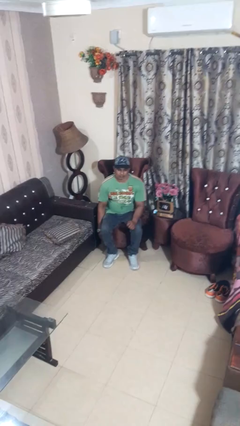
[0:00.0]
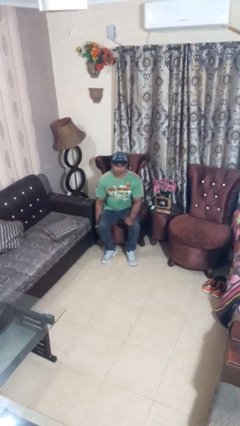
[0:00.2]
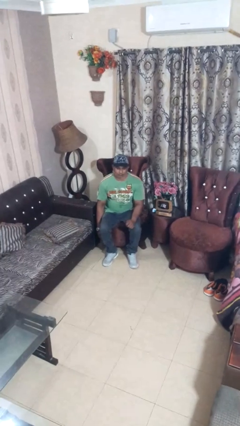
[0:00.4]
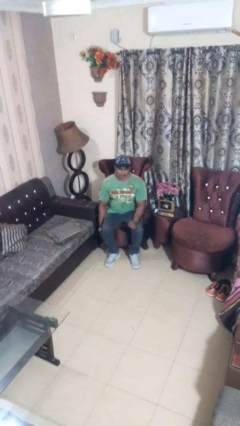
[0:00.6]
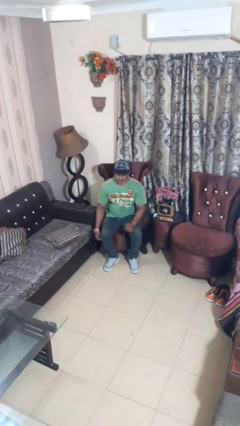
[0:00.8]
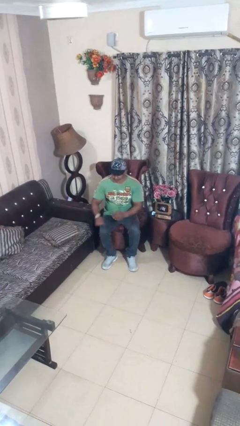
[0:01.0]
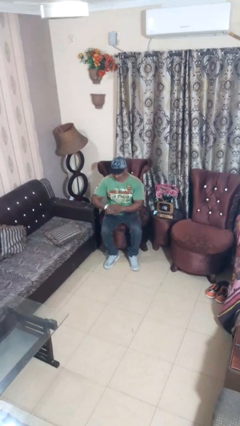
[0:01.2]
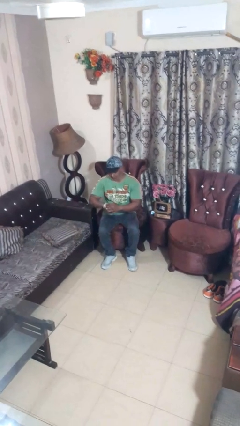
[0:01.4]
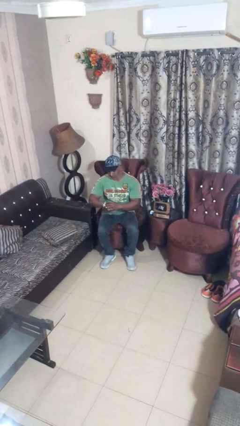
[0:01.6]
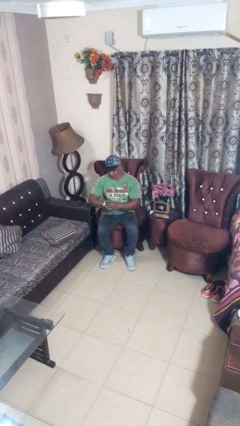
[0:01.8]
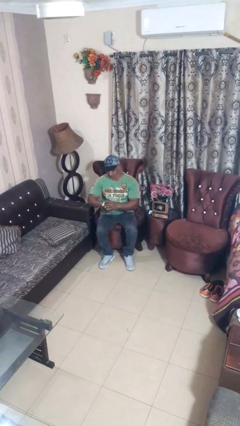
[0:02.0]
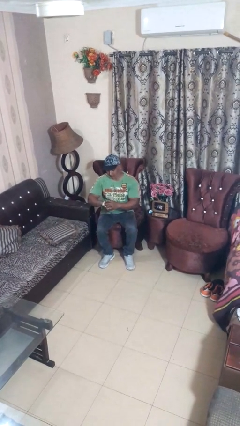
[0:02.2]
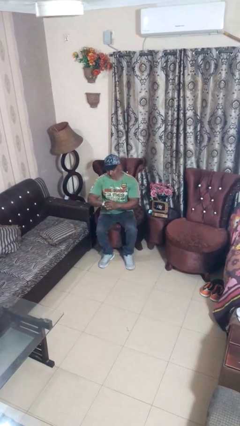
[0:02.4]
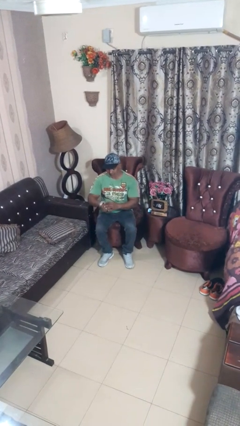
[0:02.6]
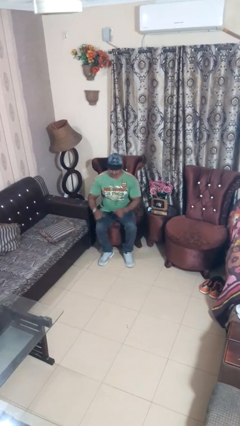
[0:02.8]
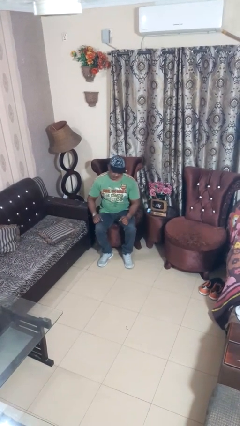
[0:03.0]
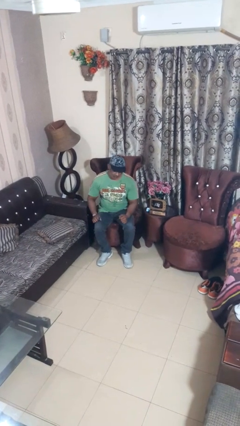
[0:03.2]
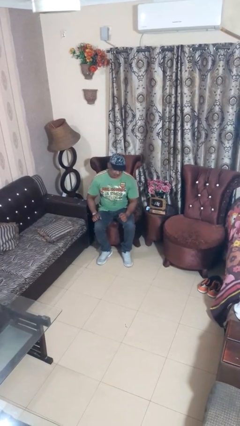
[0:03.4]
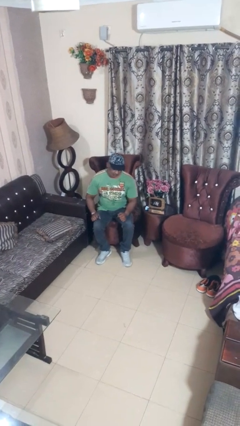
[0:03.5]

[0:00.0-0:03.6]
person looks at wristwatch

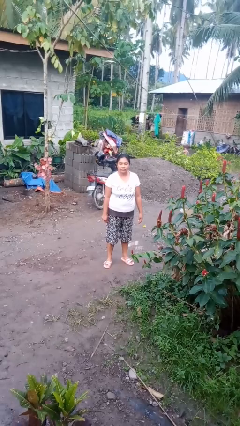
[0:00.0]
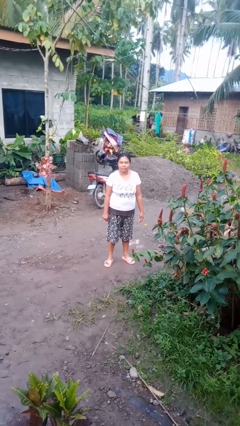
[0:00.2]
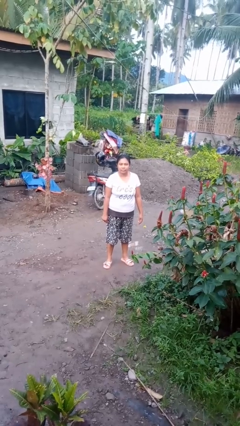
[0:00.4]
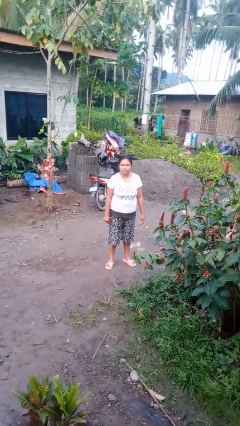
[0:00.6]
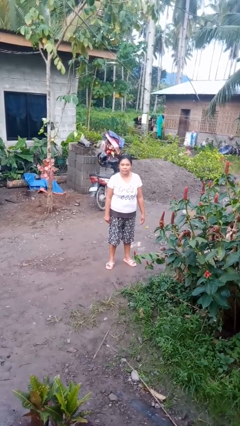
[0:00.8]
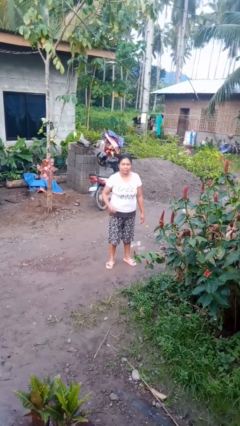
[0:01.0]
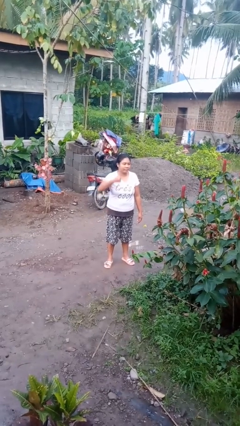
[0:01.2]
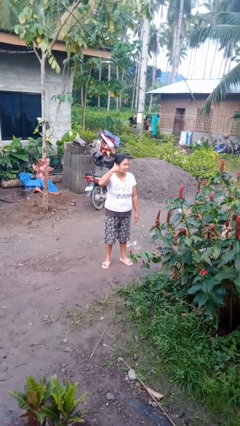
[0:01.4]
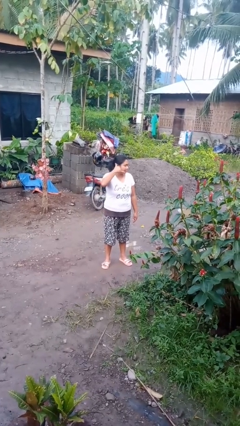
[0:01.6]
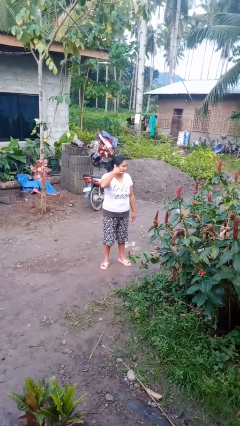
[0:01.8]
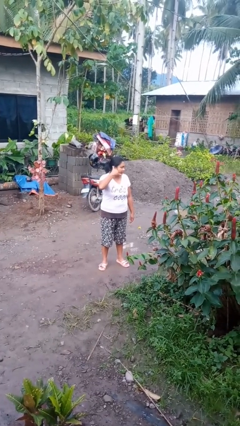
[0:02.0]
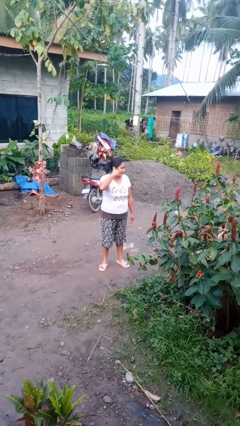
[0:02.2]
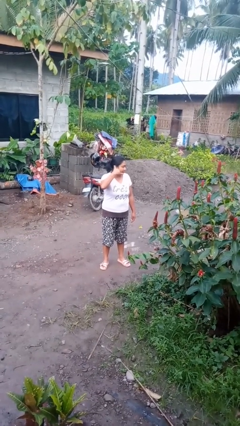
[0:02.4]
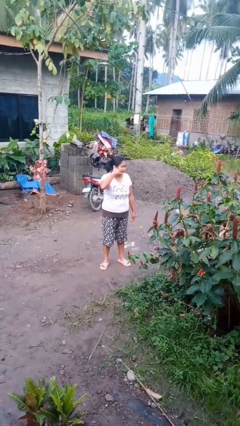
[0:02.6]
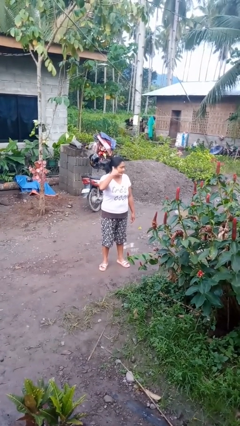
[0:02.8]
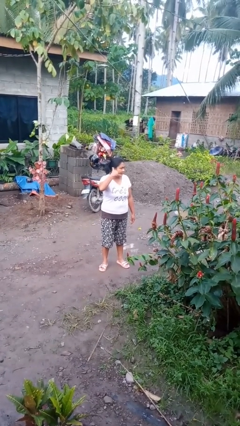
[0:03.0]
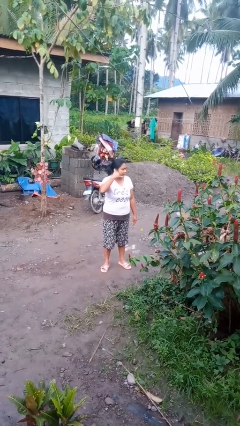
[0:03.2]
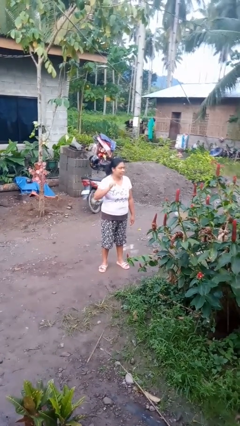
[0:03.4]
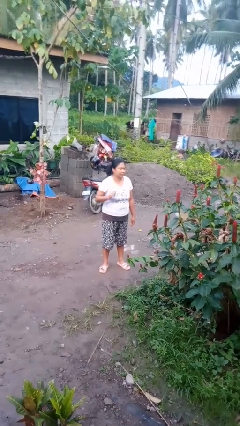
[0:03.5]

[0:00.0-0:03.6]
person gestures call me

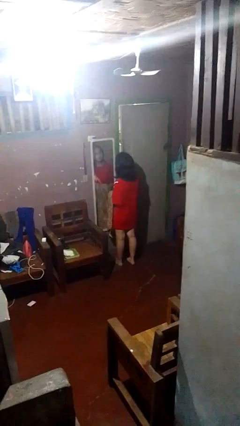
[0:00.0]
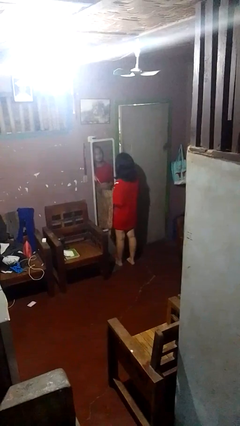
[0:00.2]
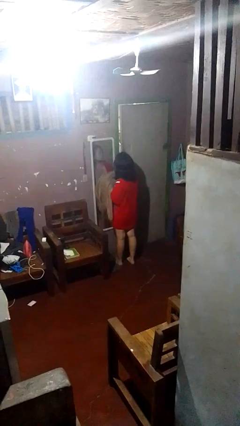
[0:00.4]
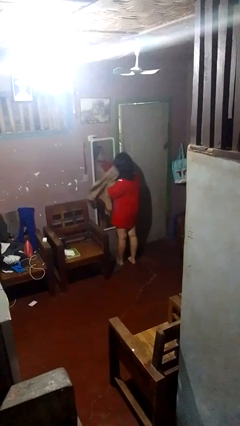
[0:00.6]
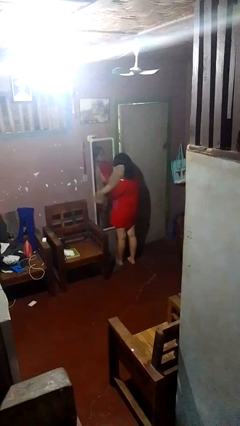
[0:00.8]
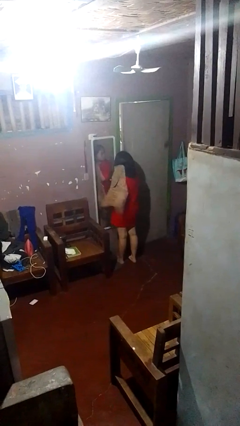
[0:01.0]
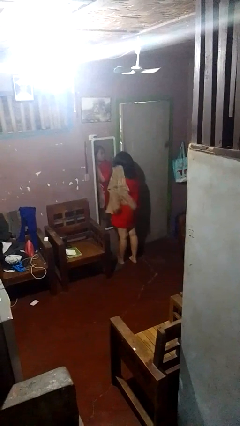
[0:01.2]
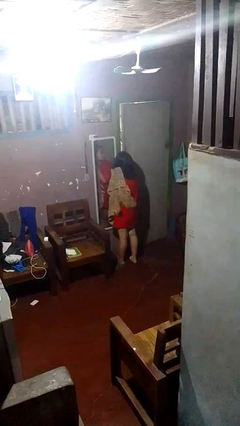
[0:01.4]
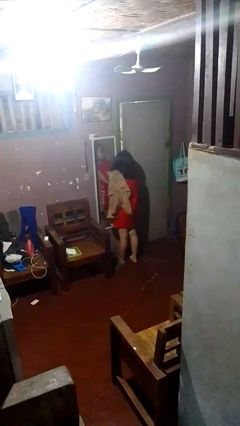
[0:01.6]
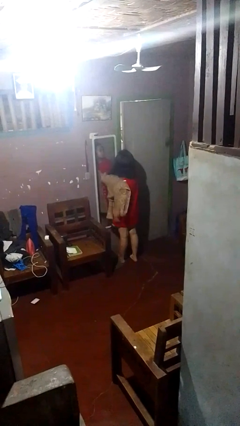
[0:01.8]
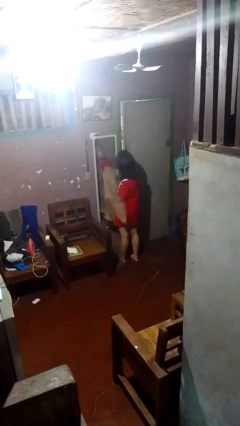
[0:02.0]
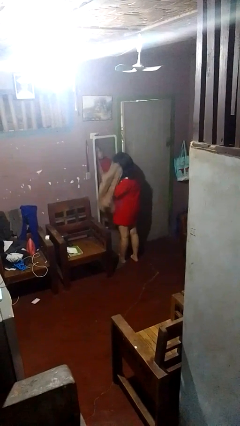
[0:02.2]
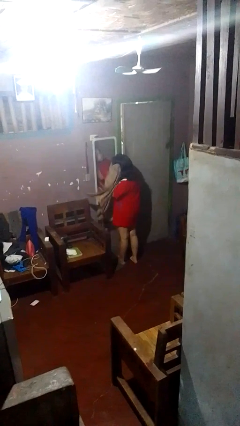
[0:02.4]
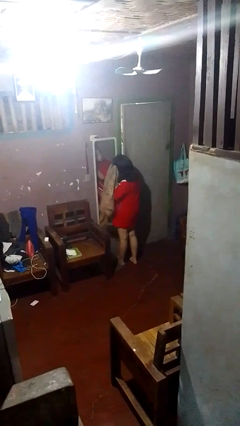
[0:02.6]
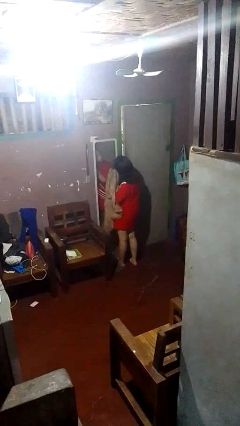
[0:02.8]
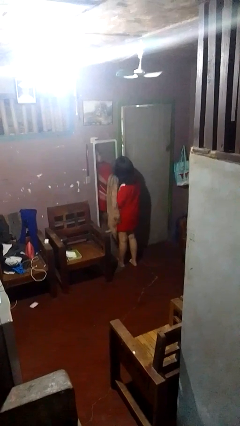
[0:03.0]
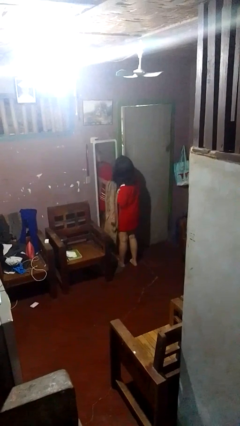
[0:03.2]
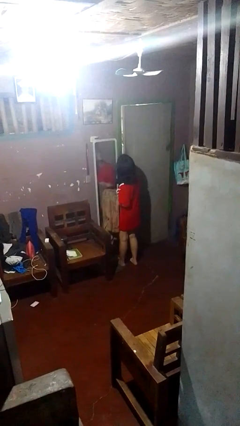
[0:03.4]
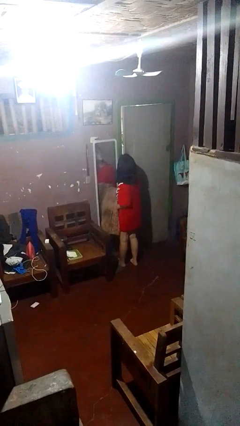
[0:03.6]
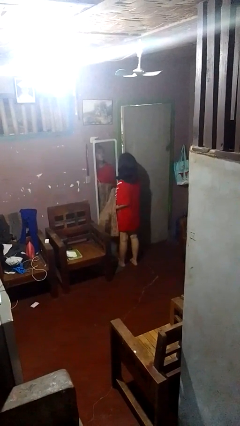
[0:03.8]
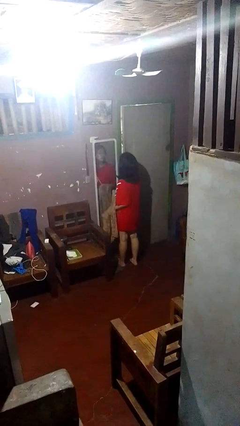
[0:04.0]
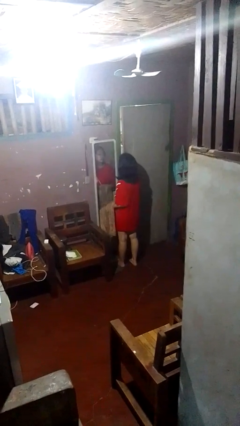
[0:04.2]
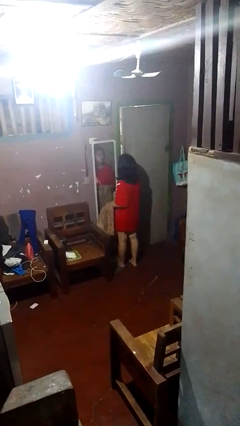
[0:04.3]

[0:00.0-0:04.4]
person dries hair with towel

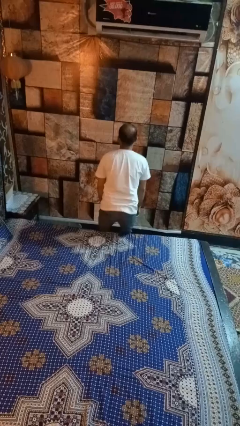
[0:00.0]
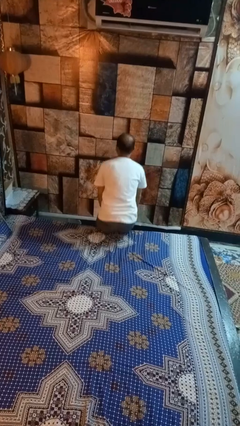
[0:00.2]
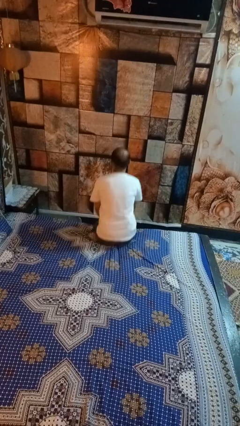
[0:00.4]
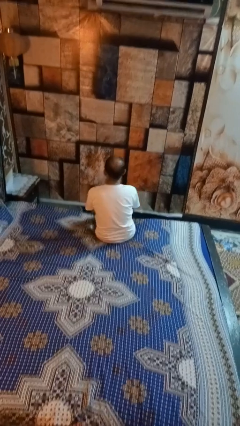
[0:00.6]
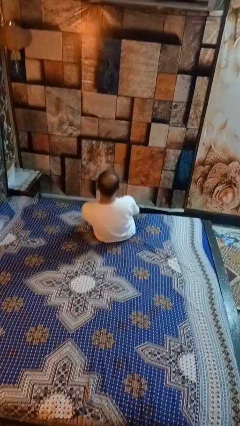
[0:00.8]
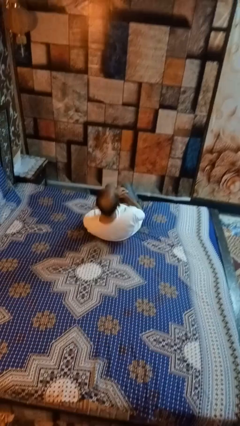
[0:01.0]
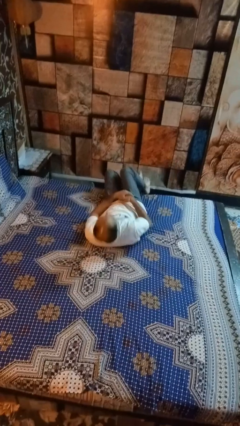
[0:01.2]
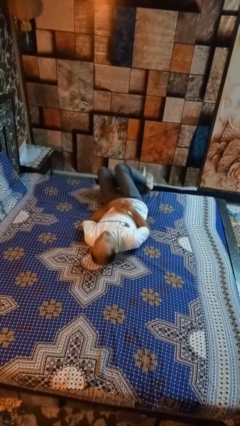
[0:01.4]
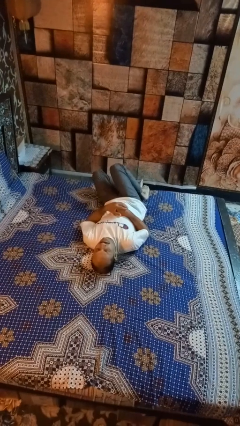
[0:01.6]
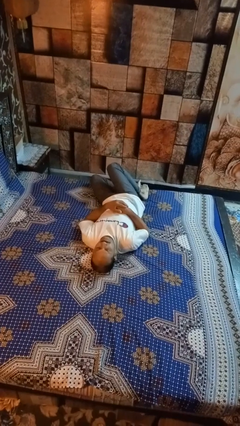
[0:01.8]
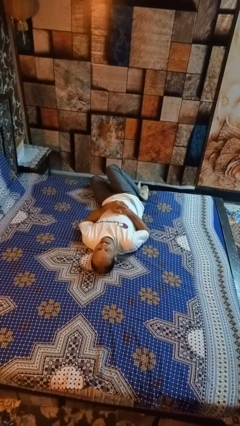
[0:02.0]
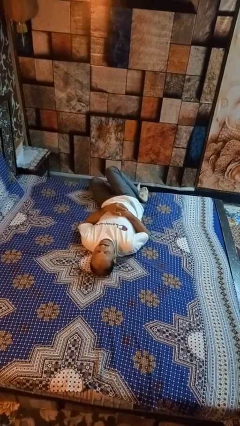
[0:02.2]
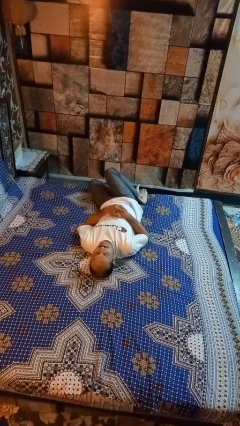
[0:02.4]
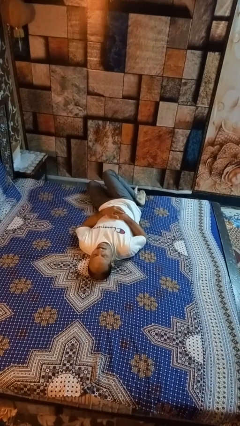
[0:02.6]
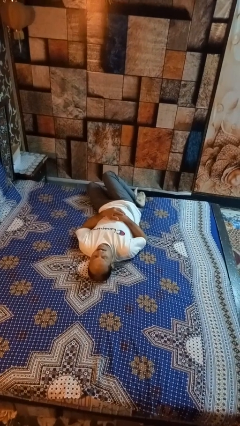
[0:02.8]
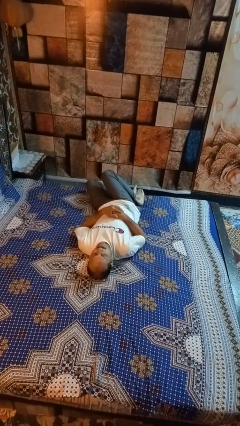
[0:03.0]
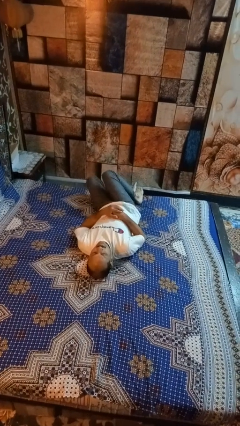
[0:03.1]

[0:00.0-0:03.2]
person lies down on bed

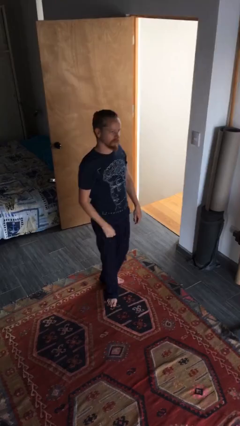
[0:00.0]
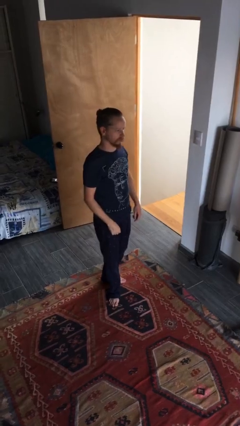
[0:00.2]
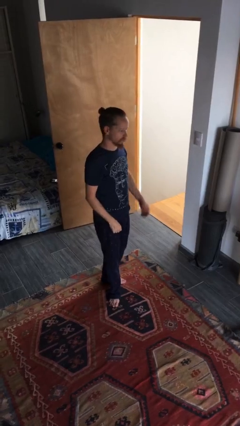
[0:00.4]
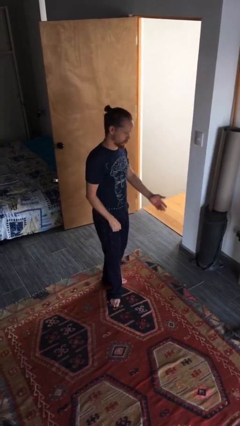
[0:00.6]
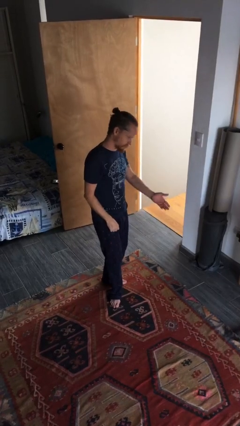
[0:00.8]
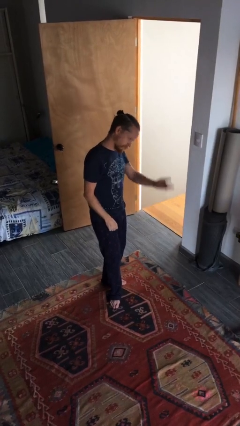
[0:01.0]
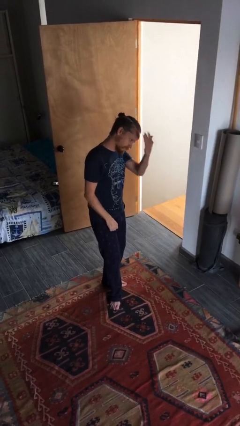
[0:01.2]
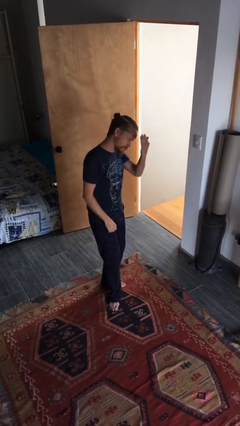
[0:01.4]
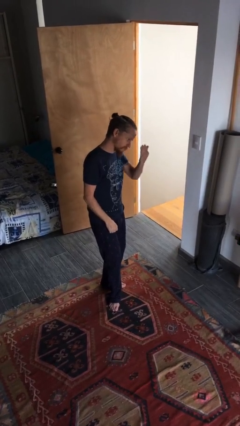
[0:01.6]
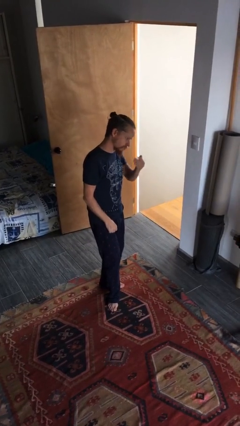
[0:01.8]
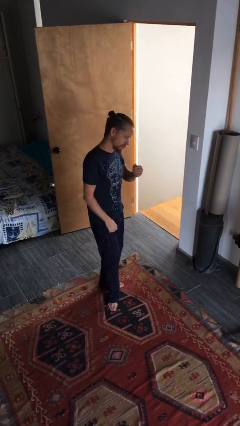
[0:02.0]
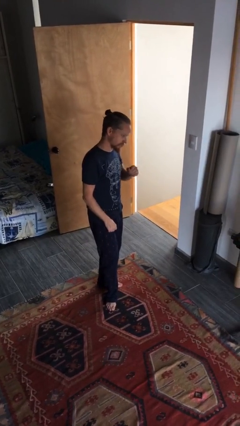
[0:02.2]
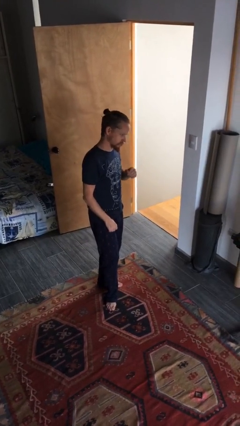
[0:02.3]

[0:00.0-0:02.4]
person gestures swipe up

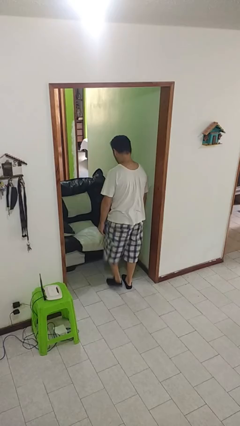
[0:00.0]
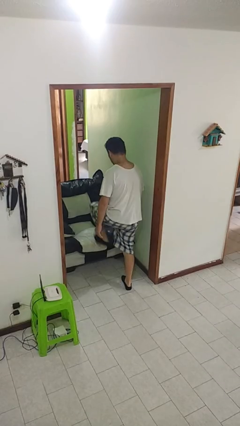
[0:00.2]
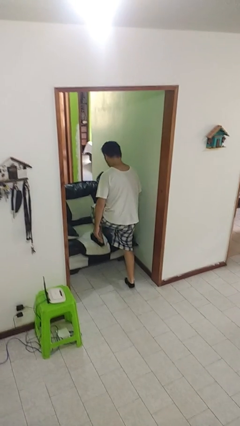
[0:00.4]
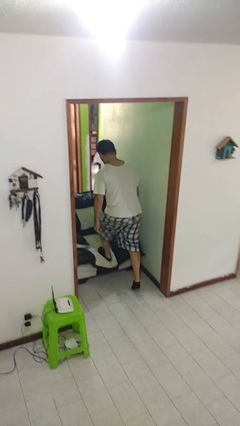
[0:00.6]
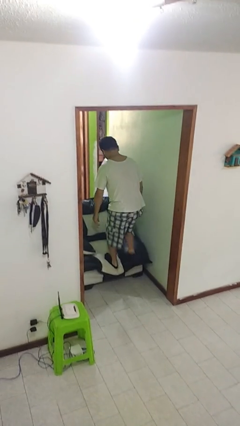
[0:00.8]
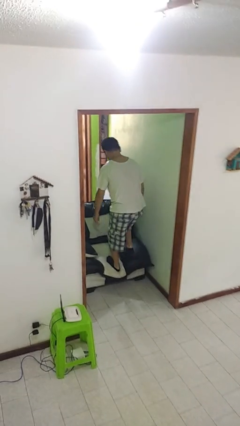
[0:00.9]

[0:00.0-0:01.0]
person climbs on couch
